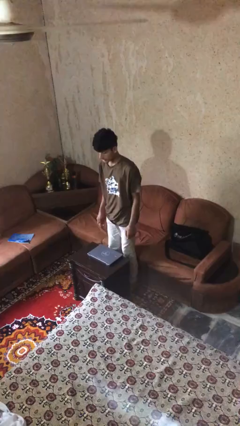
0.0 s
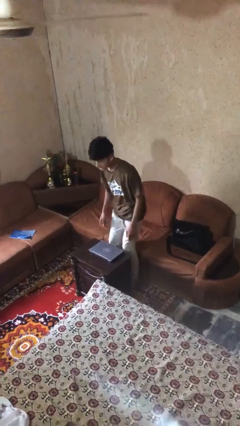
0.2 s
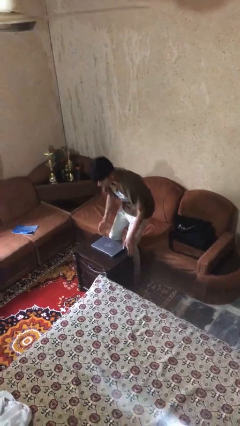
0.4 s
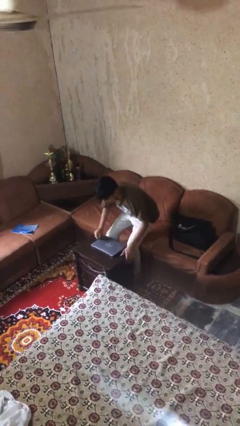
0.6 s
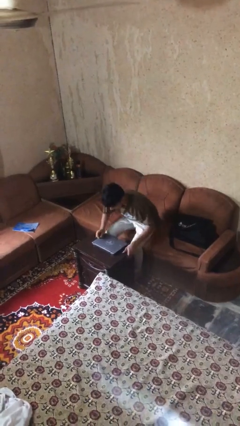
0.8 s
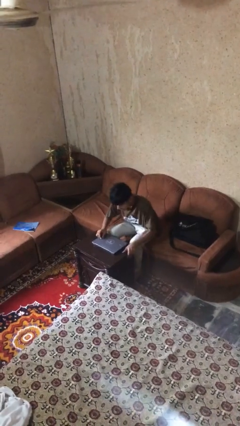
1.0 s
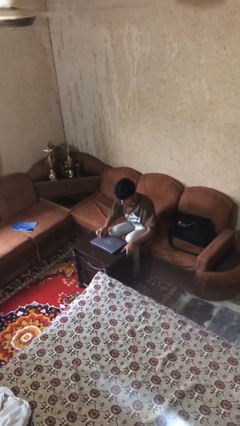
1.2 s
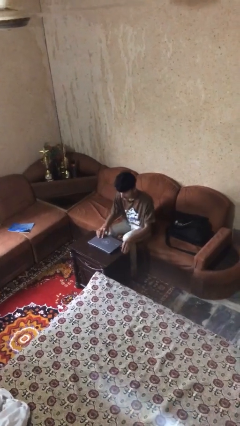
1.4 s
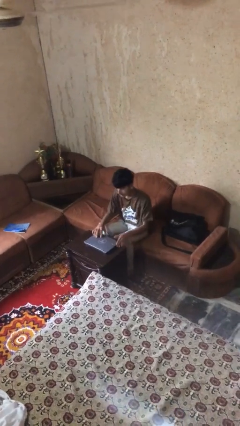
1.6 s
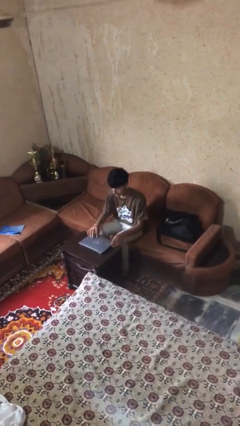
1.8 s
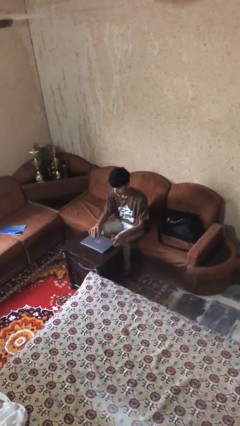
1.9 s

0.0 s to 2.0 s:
person sits down

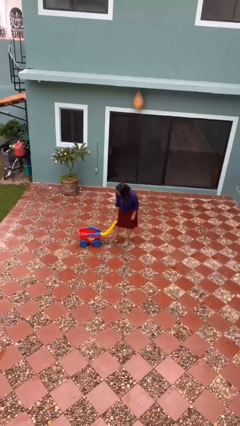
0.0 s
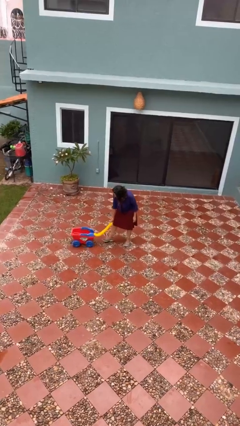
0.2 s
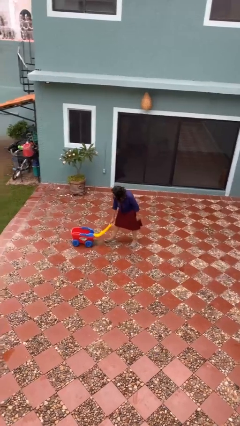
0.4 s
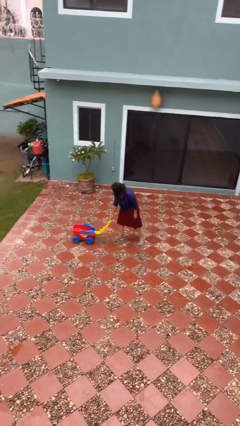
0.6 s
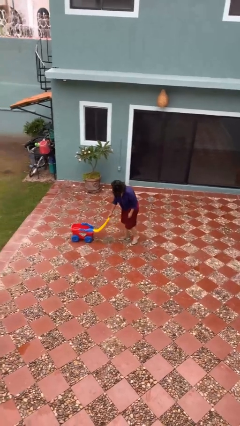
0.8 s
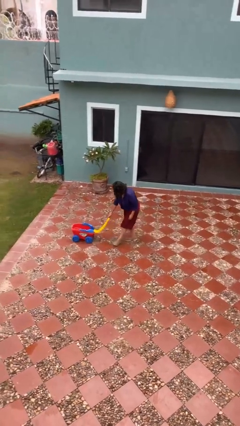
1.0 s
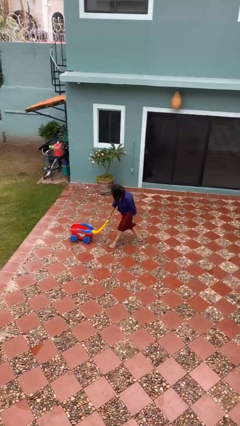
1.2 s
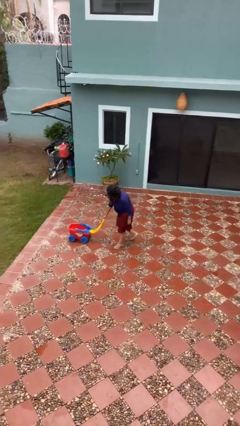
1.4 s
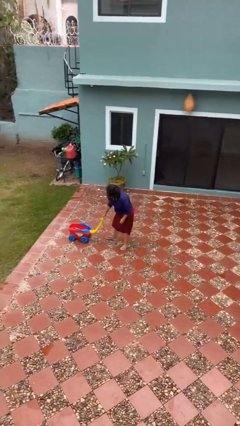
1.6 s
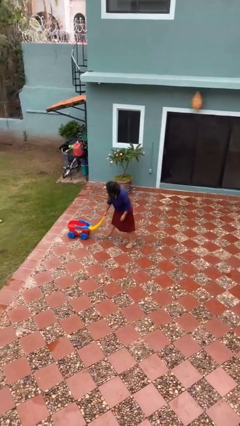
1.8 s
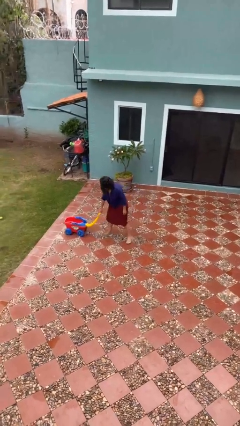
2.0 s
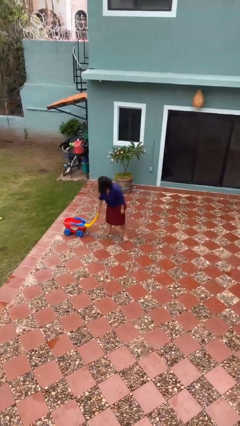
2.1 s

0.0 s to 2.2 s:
person pushes wheeled cart

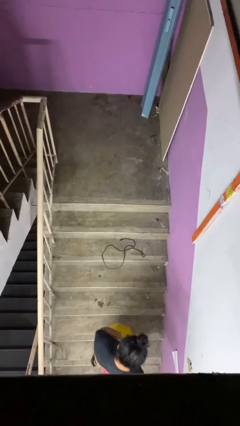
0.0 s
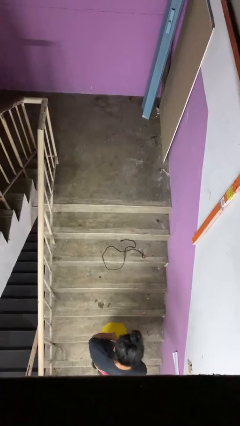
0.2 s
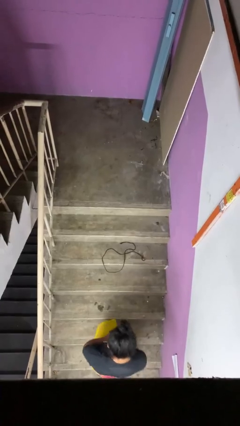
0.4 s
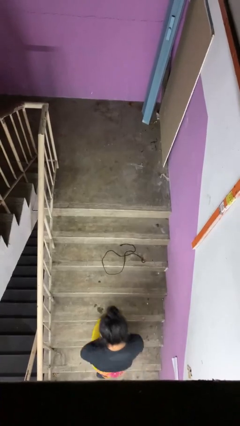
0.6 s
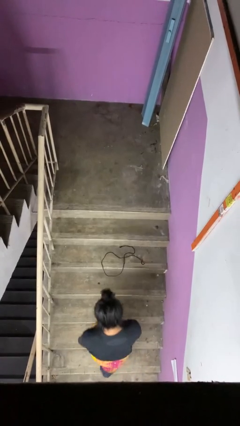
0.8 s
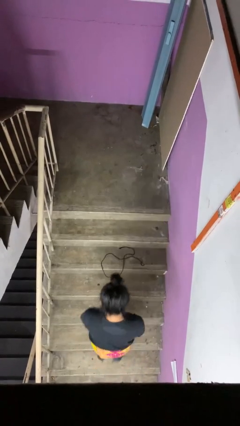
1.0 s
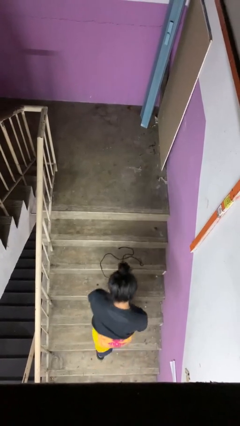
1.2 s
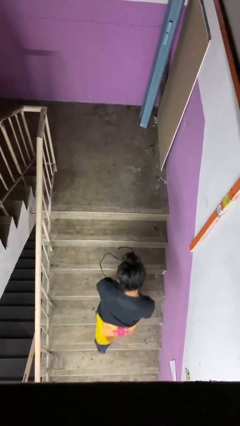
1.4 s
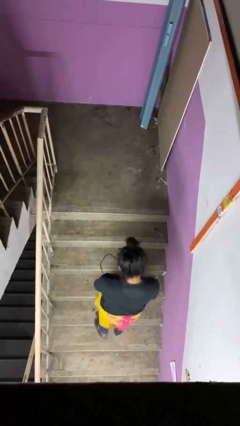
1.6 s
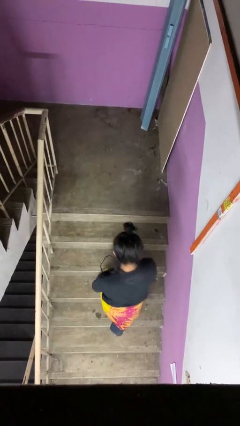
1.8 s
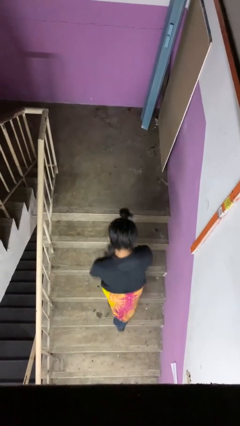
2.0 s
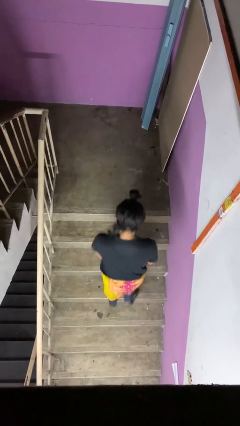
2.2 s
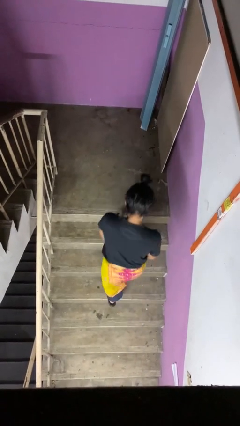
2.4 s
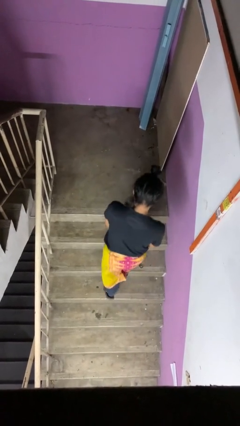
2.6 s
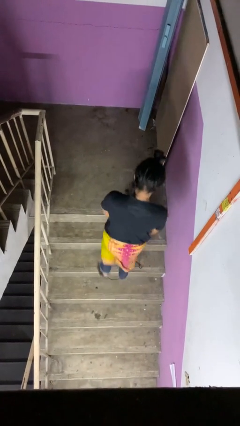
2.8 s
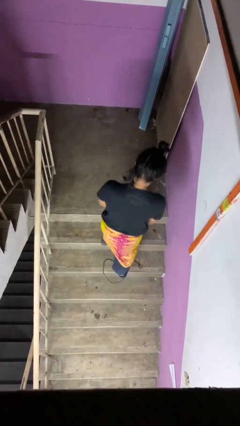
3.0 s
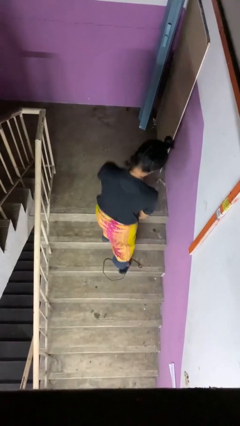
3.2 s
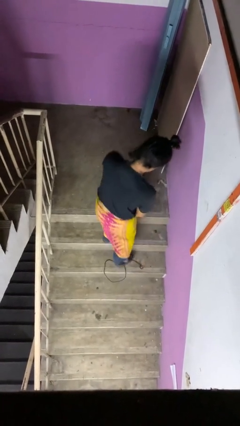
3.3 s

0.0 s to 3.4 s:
person climbs up stairs

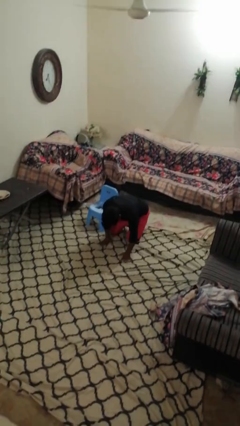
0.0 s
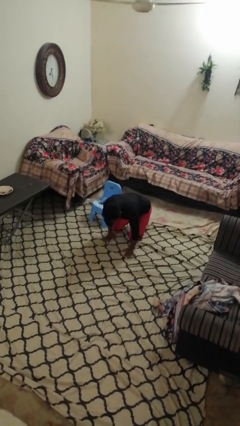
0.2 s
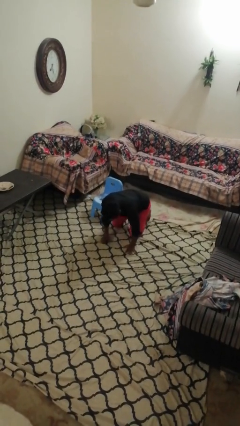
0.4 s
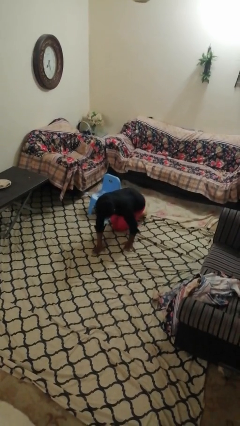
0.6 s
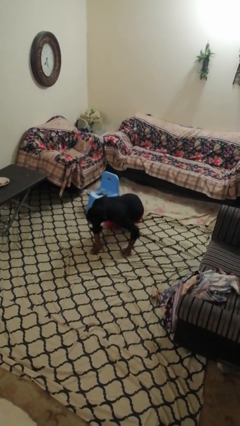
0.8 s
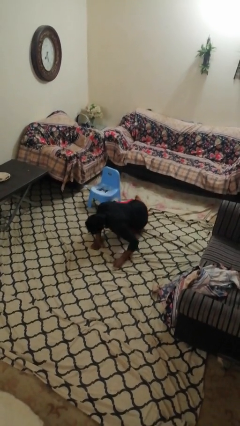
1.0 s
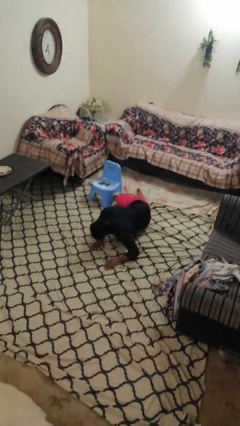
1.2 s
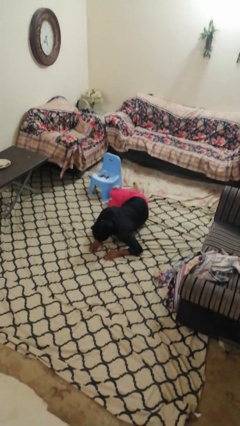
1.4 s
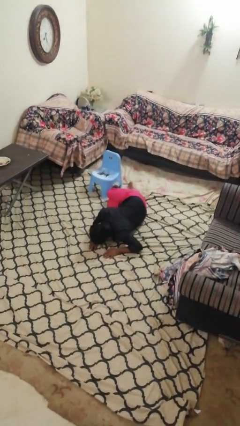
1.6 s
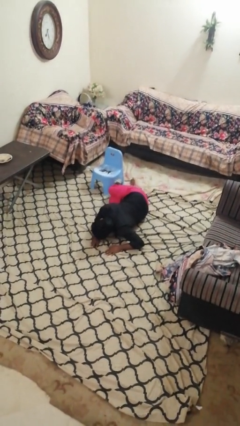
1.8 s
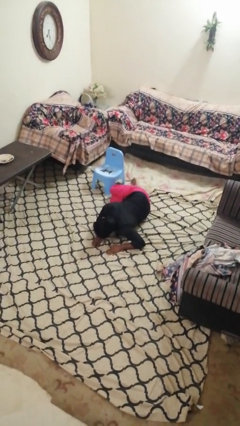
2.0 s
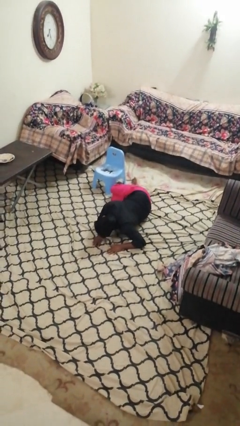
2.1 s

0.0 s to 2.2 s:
person lies down on floor

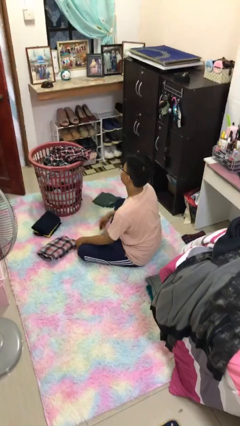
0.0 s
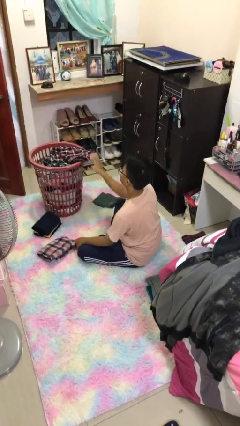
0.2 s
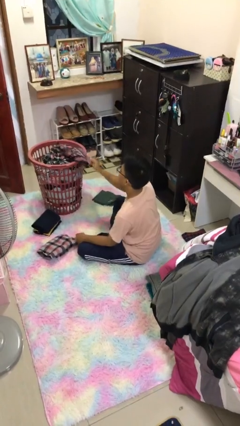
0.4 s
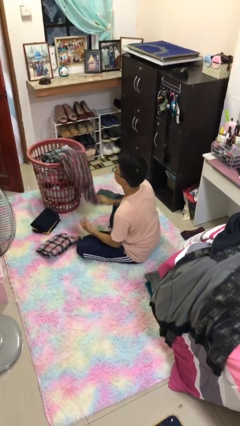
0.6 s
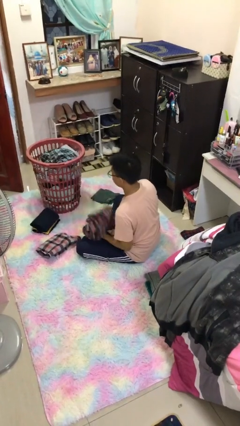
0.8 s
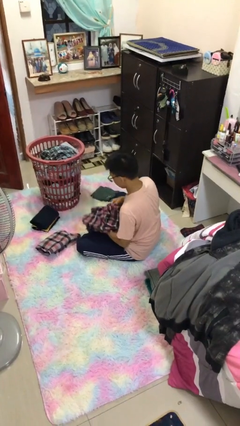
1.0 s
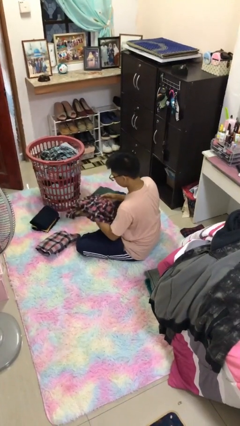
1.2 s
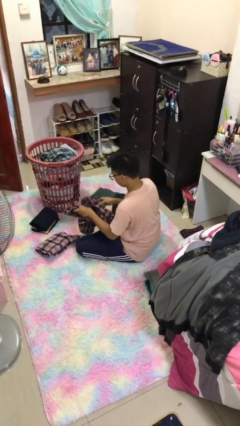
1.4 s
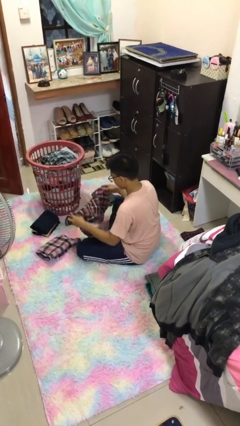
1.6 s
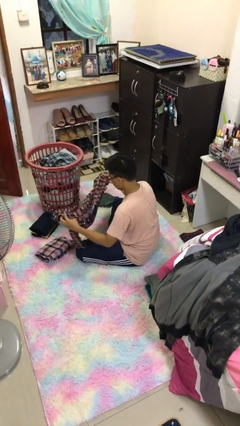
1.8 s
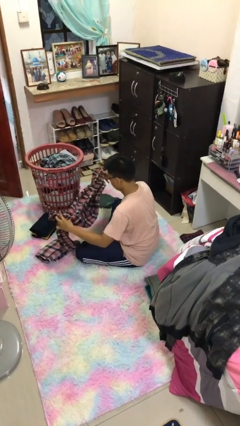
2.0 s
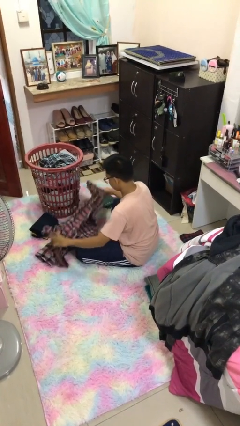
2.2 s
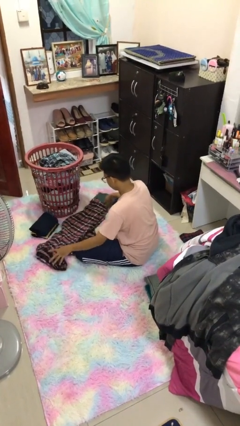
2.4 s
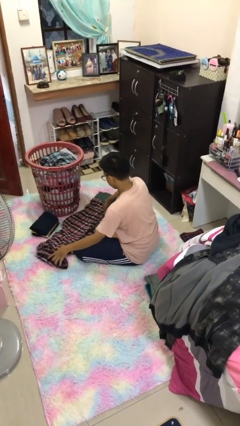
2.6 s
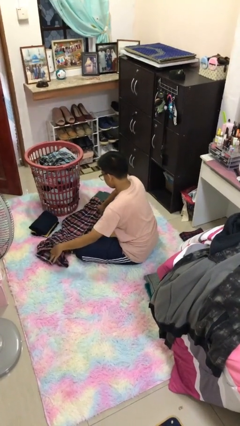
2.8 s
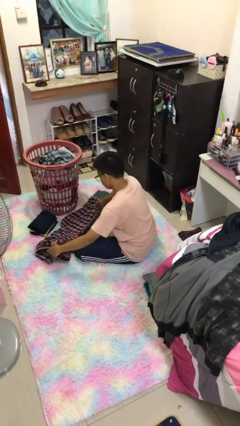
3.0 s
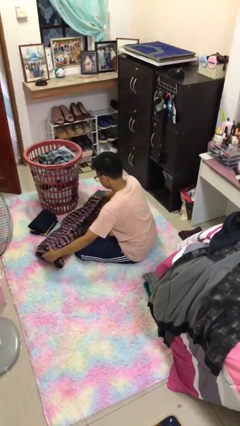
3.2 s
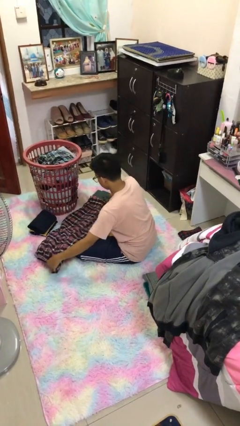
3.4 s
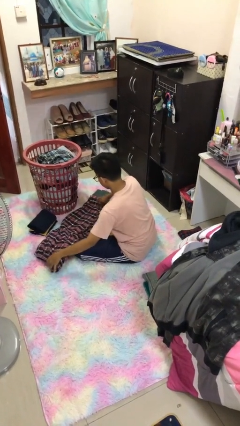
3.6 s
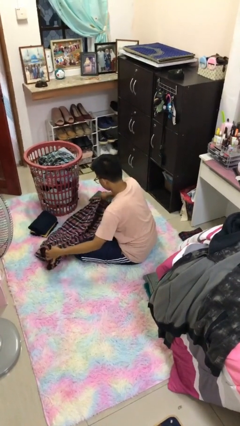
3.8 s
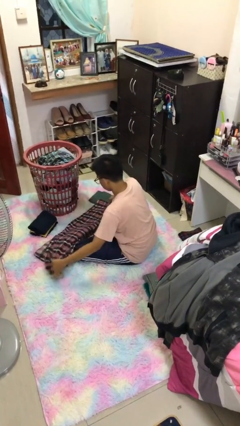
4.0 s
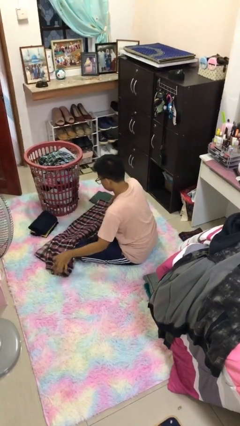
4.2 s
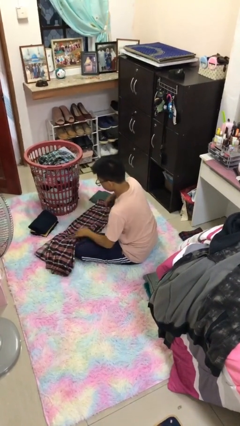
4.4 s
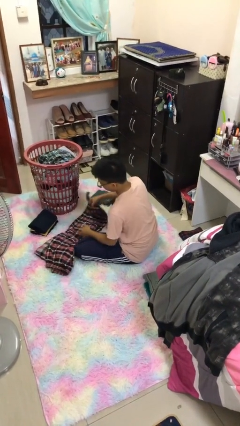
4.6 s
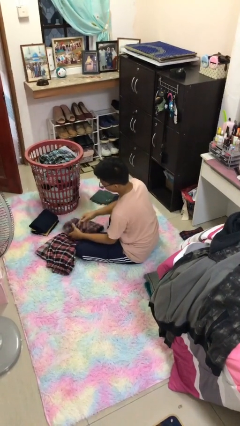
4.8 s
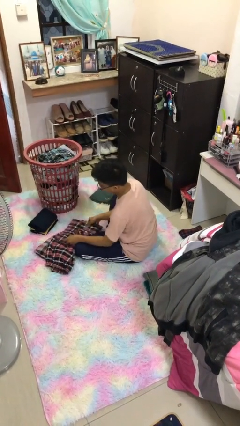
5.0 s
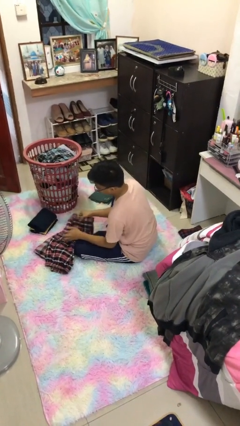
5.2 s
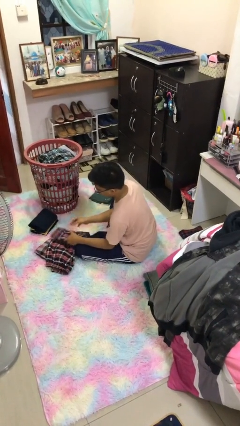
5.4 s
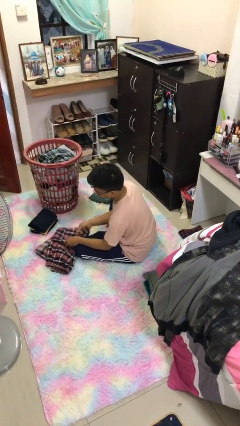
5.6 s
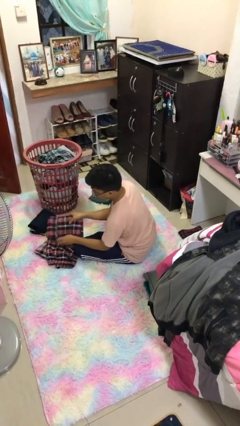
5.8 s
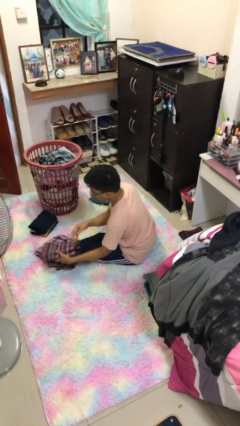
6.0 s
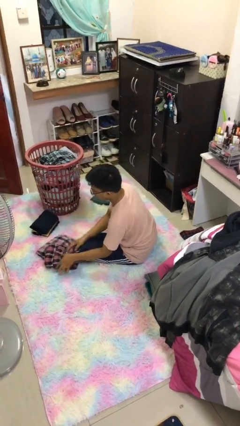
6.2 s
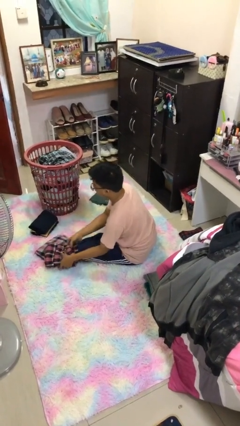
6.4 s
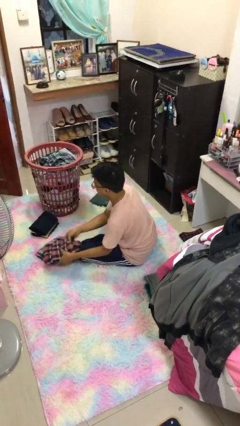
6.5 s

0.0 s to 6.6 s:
person folds pants

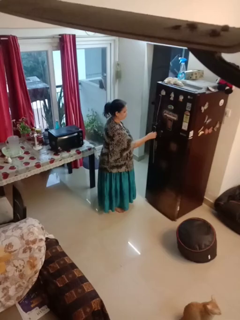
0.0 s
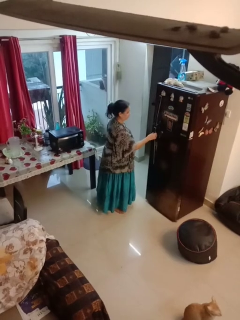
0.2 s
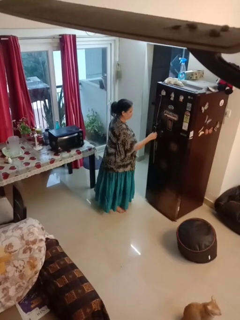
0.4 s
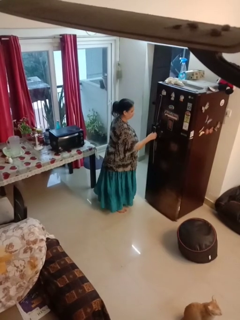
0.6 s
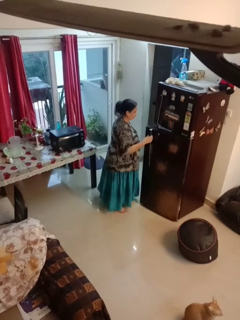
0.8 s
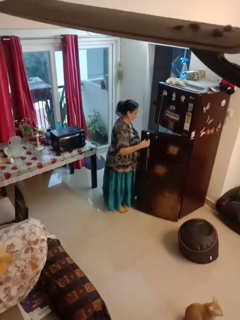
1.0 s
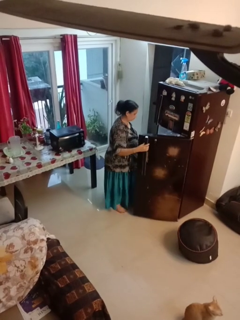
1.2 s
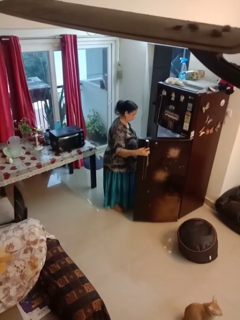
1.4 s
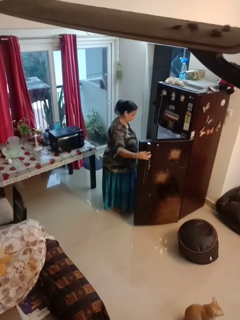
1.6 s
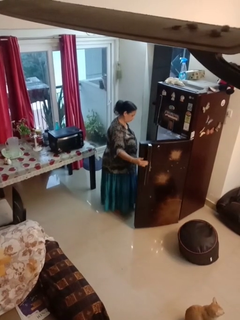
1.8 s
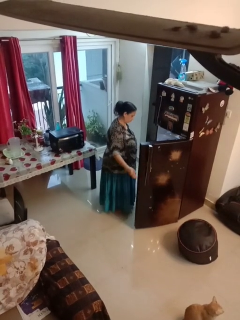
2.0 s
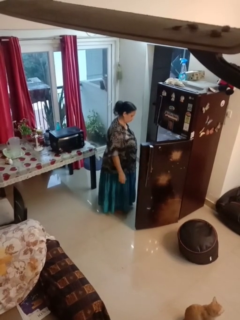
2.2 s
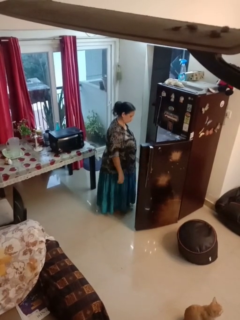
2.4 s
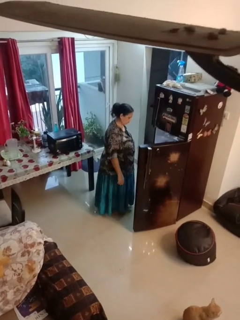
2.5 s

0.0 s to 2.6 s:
person opens refrigerator
